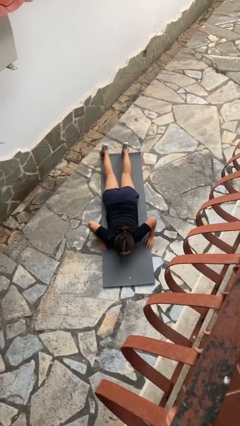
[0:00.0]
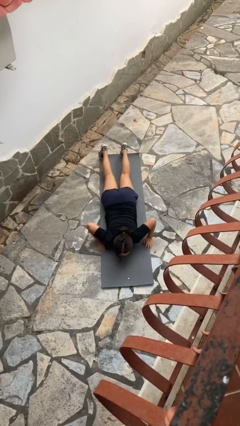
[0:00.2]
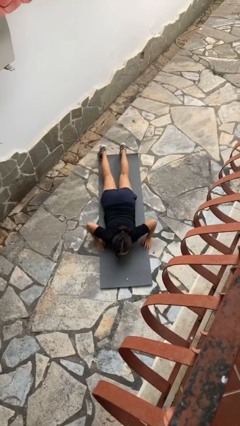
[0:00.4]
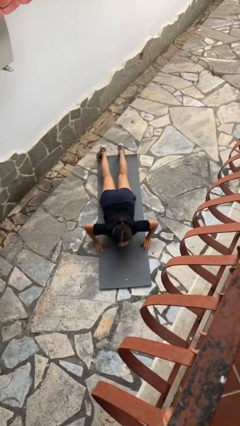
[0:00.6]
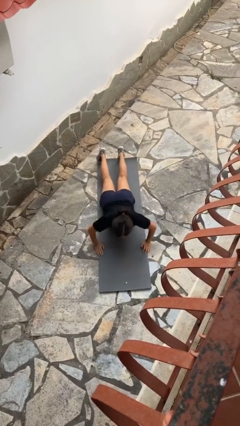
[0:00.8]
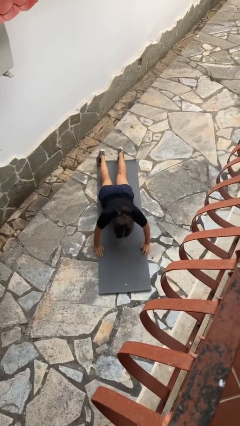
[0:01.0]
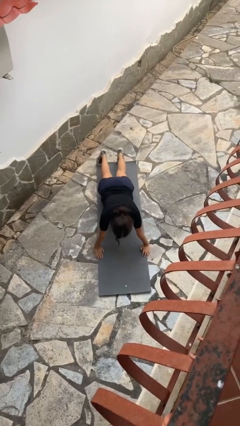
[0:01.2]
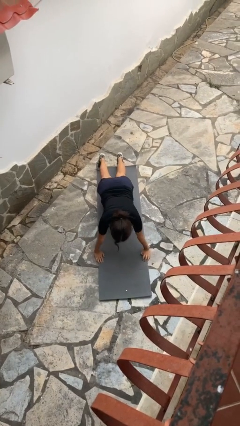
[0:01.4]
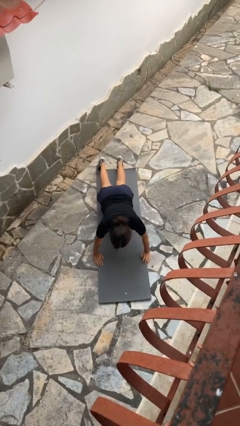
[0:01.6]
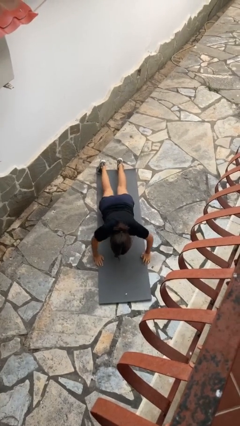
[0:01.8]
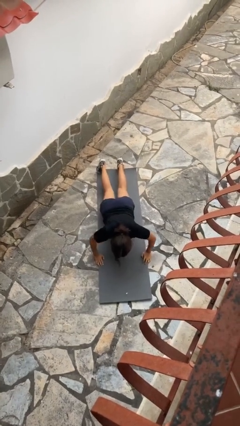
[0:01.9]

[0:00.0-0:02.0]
person exercises with pushup

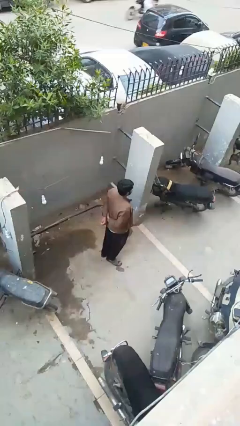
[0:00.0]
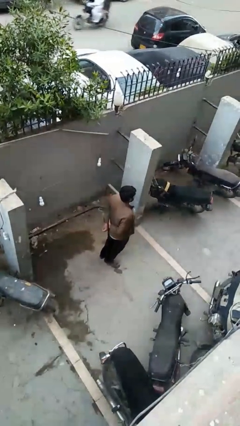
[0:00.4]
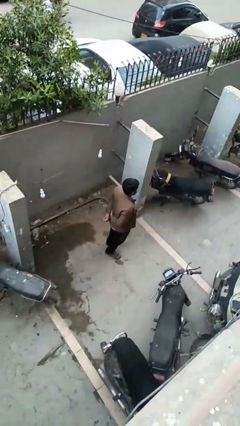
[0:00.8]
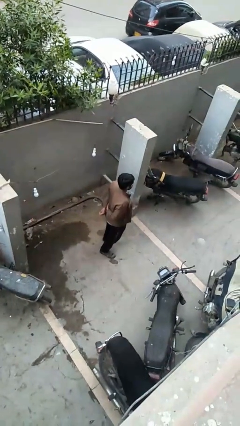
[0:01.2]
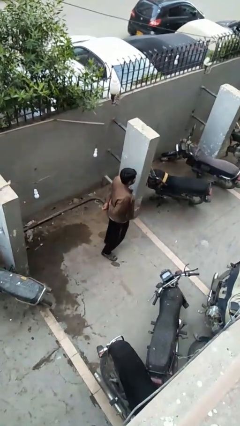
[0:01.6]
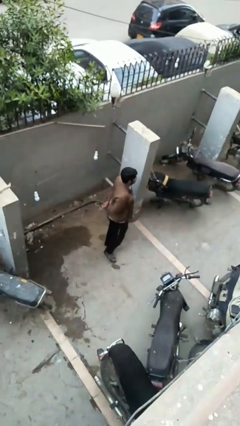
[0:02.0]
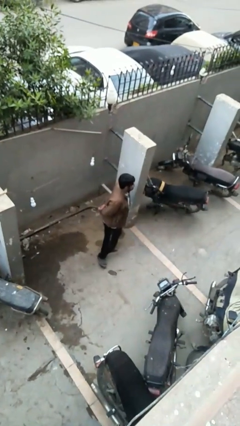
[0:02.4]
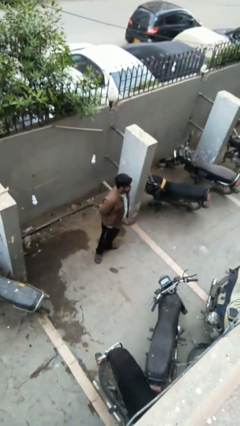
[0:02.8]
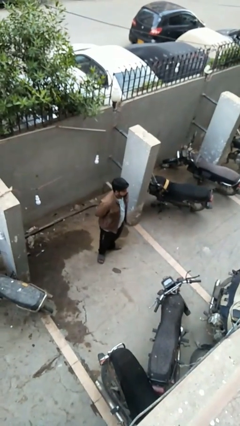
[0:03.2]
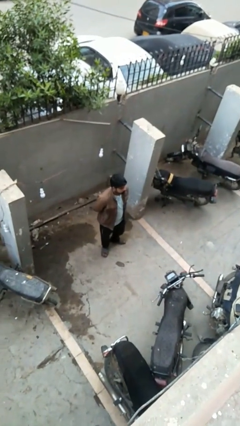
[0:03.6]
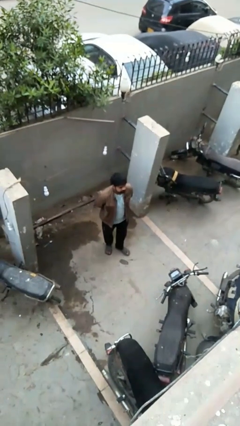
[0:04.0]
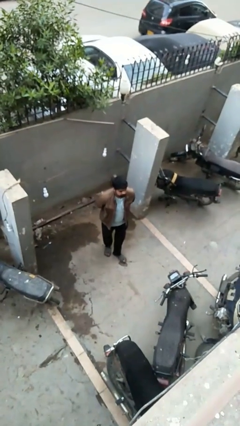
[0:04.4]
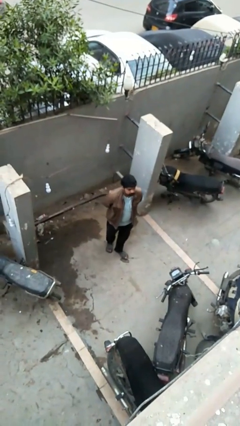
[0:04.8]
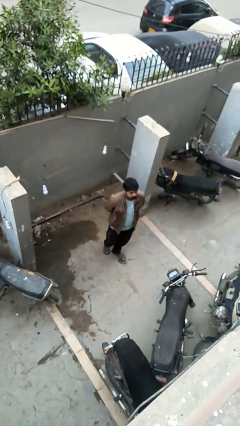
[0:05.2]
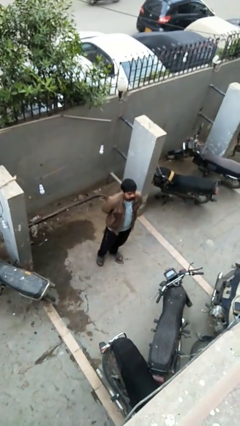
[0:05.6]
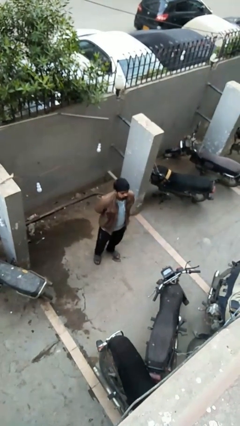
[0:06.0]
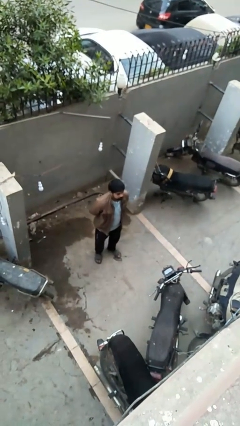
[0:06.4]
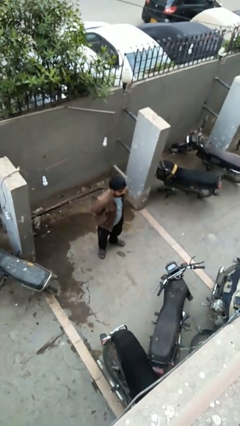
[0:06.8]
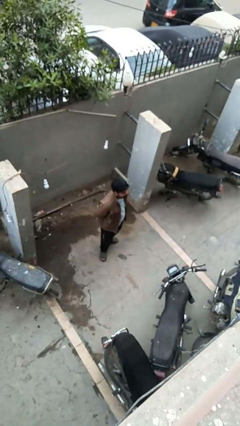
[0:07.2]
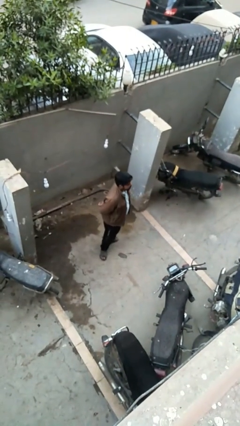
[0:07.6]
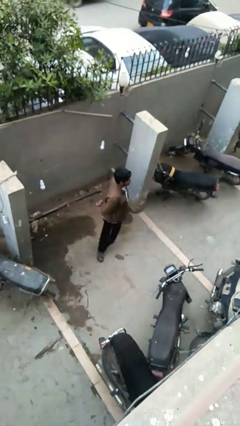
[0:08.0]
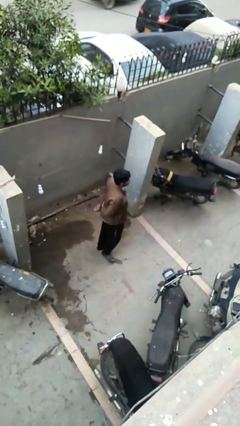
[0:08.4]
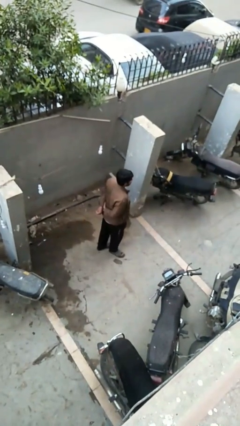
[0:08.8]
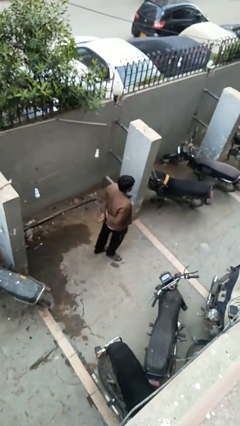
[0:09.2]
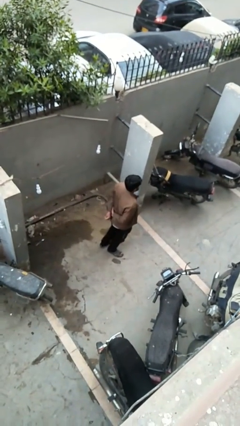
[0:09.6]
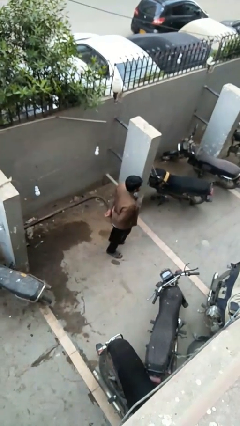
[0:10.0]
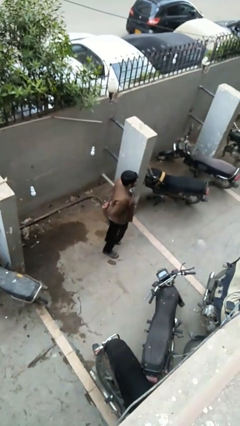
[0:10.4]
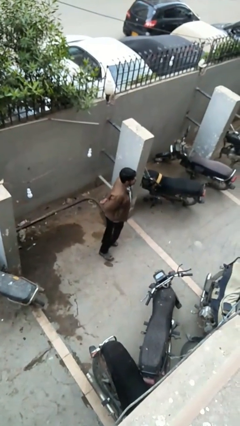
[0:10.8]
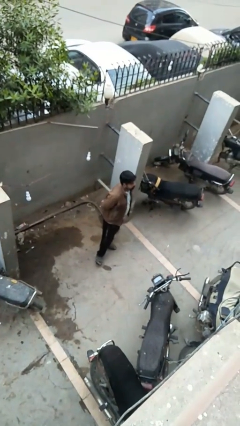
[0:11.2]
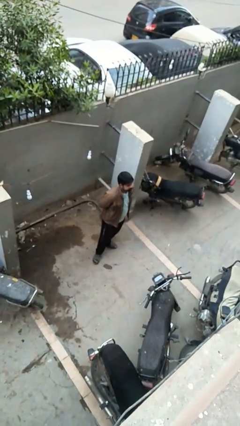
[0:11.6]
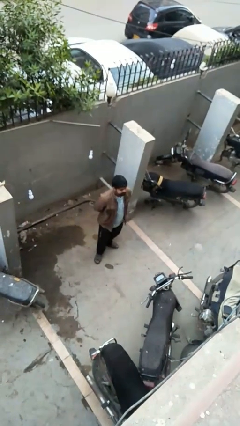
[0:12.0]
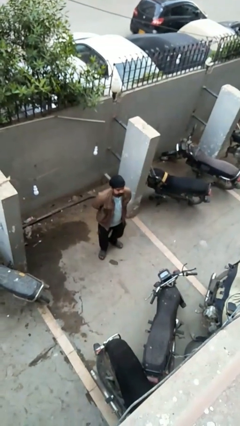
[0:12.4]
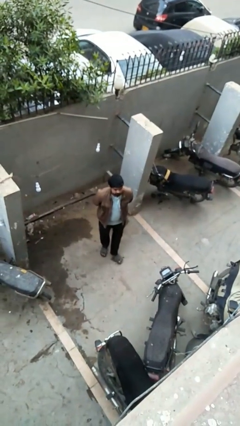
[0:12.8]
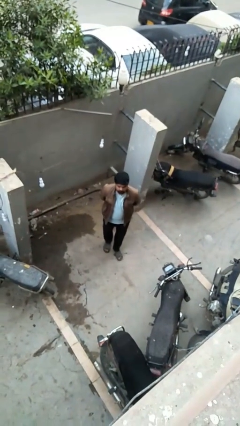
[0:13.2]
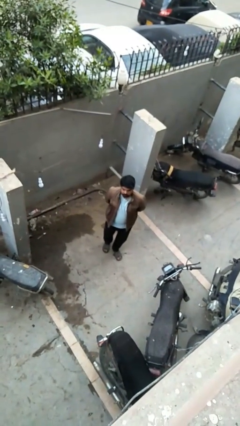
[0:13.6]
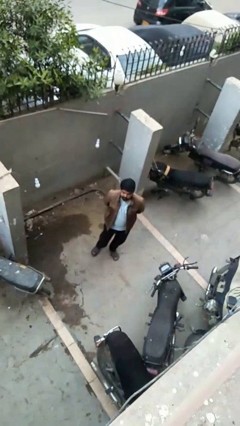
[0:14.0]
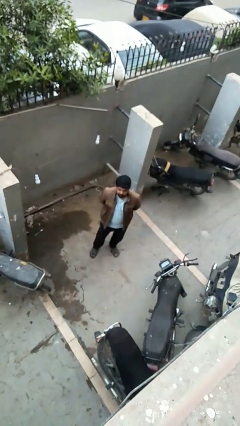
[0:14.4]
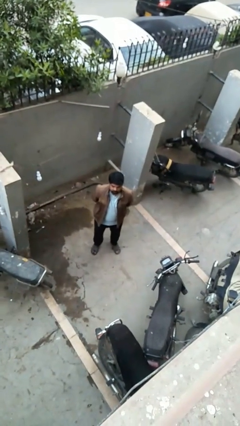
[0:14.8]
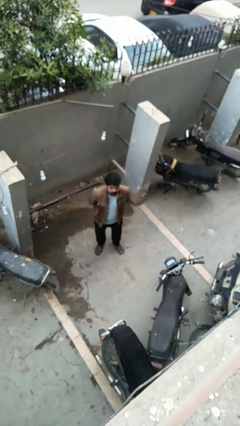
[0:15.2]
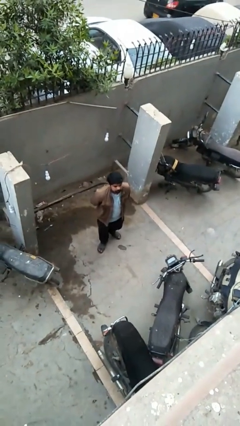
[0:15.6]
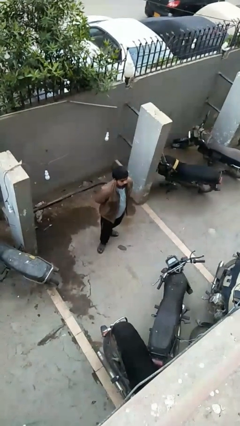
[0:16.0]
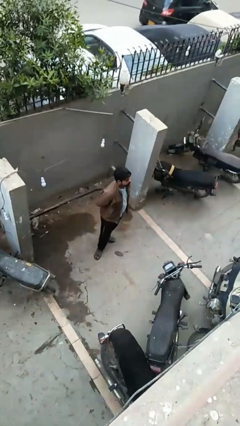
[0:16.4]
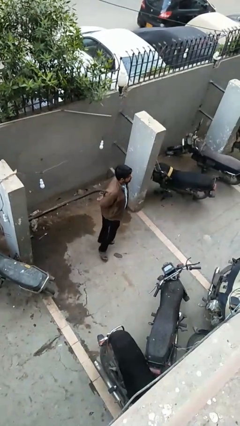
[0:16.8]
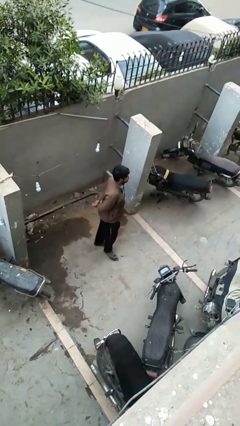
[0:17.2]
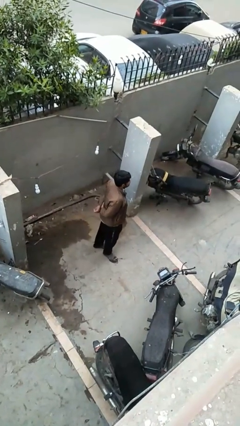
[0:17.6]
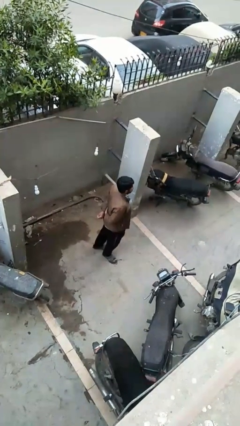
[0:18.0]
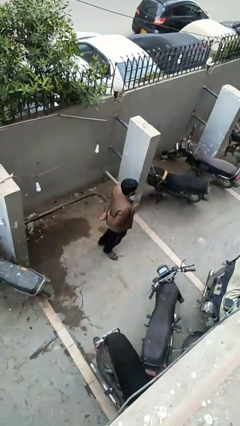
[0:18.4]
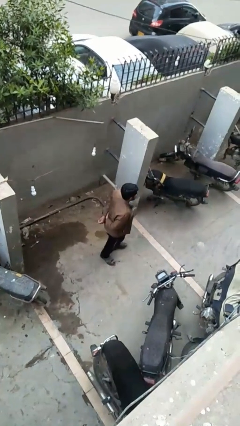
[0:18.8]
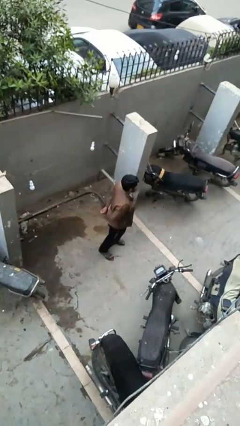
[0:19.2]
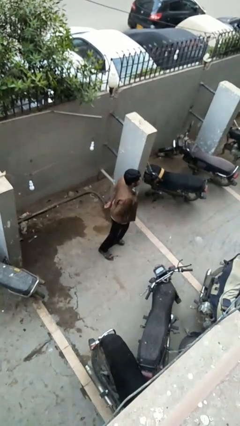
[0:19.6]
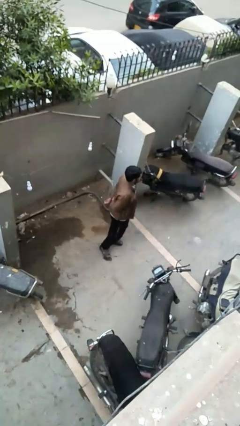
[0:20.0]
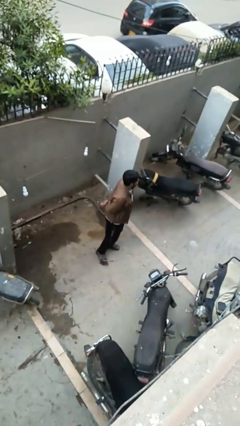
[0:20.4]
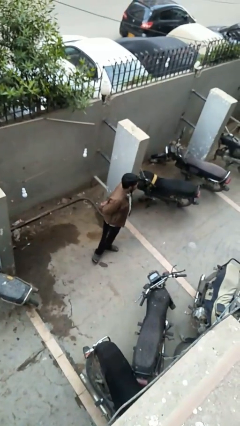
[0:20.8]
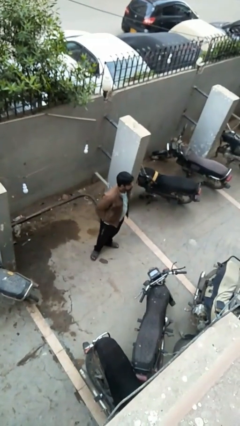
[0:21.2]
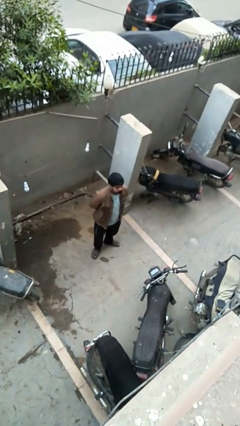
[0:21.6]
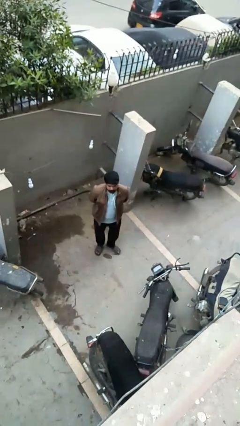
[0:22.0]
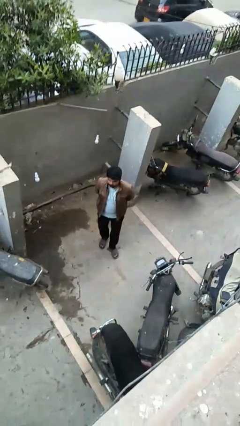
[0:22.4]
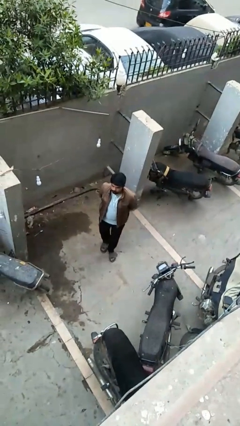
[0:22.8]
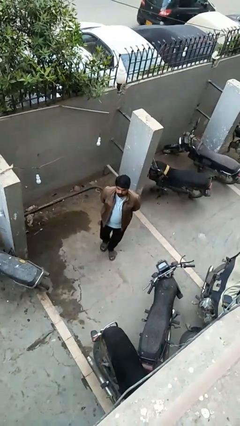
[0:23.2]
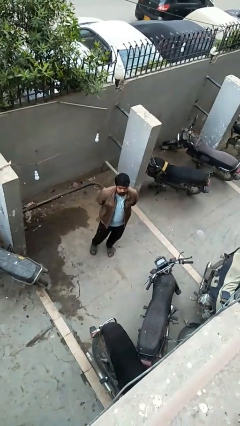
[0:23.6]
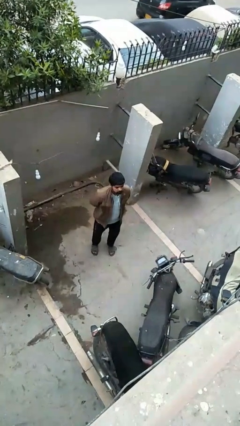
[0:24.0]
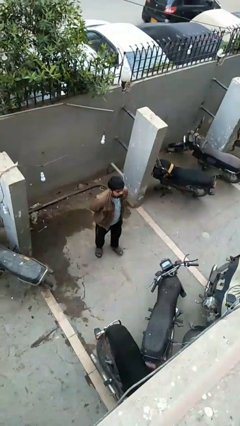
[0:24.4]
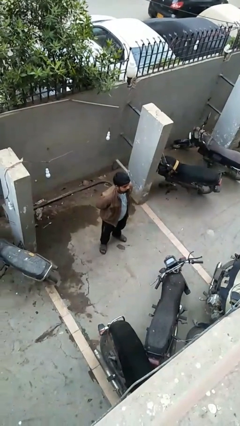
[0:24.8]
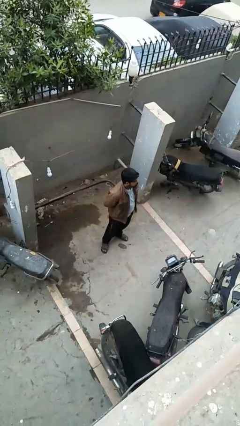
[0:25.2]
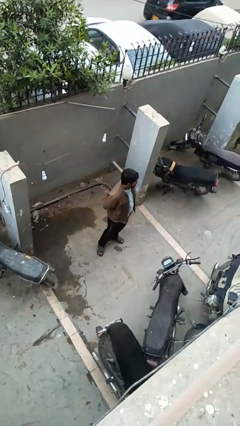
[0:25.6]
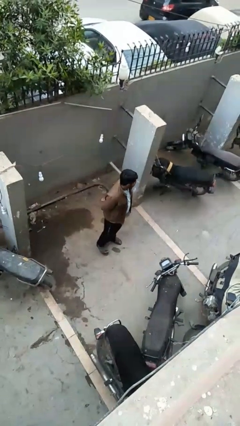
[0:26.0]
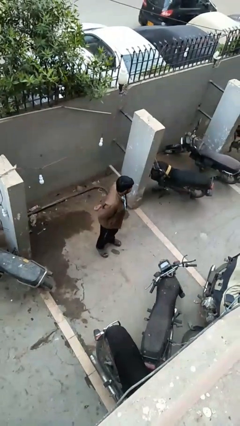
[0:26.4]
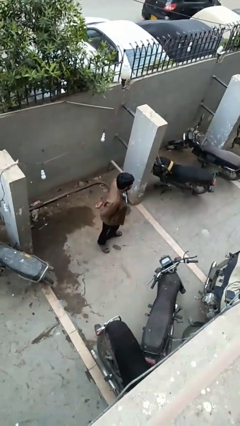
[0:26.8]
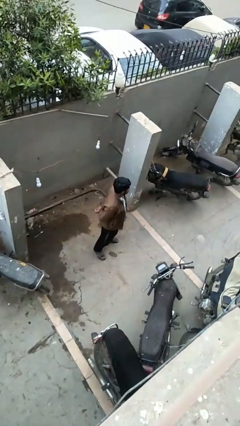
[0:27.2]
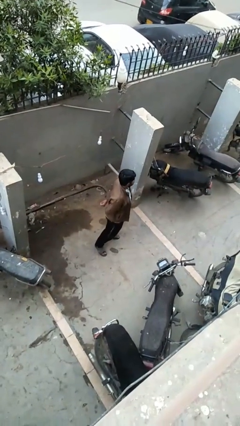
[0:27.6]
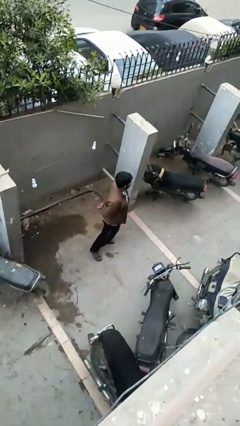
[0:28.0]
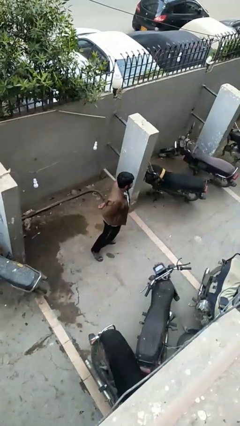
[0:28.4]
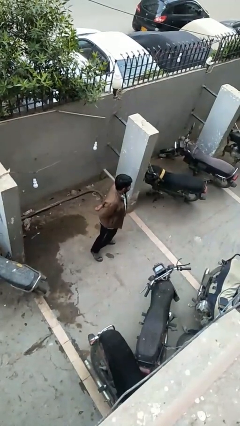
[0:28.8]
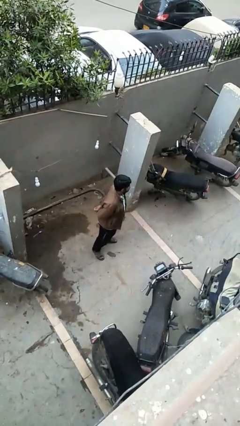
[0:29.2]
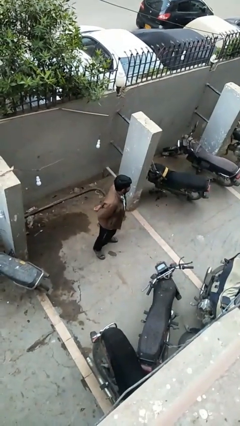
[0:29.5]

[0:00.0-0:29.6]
person walks

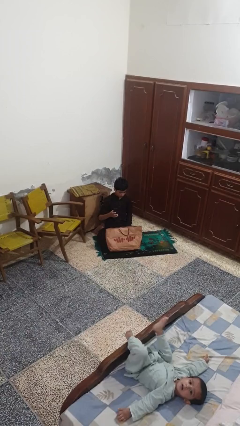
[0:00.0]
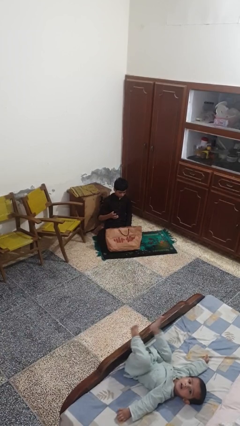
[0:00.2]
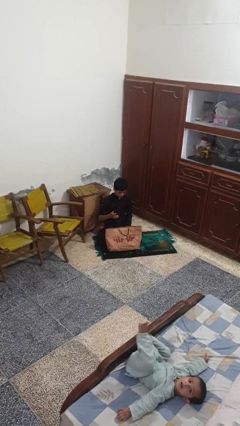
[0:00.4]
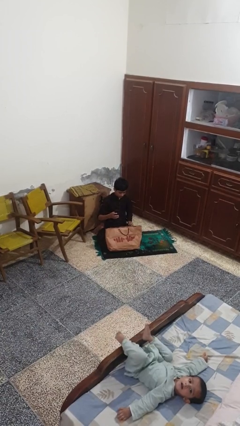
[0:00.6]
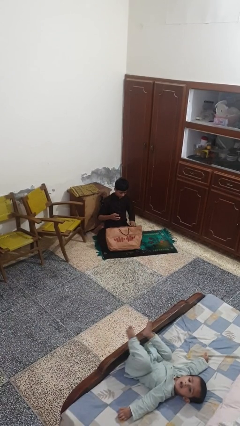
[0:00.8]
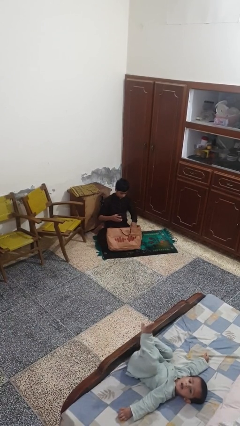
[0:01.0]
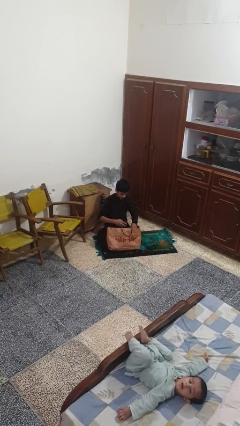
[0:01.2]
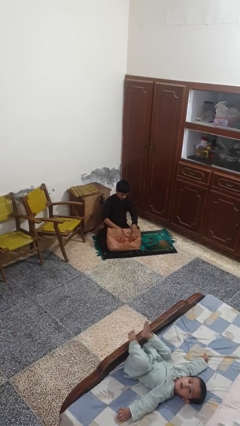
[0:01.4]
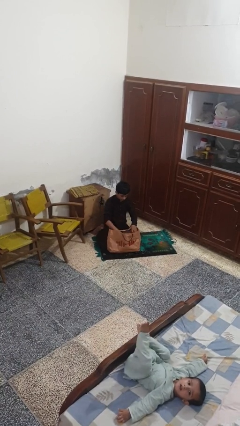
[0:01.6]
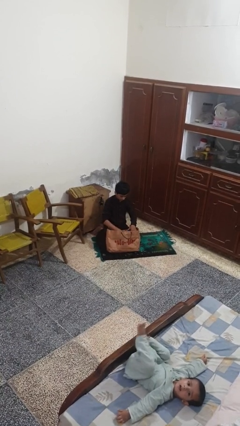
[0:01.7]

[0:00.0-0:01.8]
person puts object into bag
